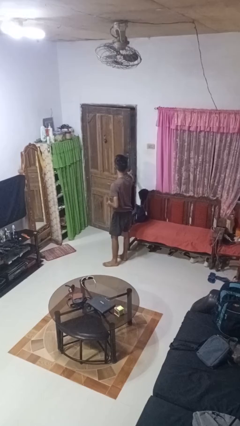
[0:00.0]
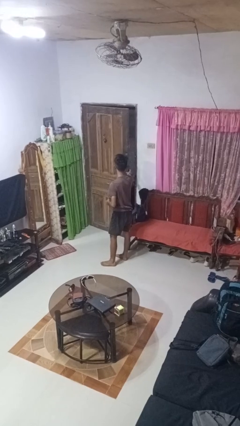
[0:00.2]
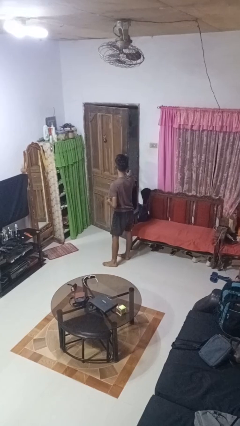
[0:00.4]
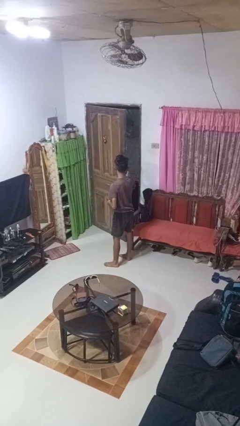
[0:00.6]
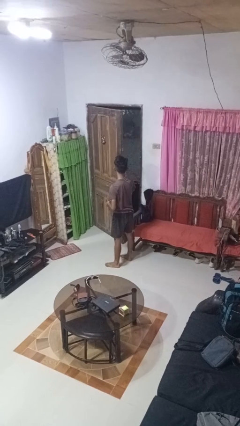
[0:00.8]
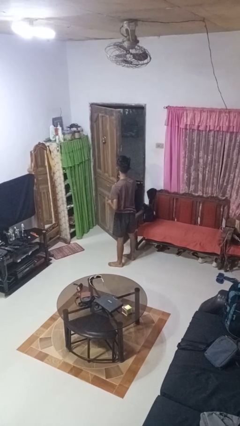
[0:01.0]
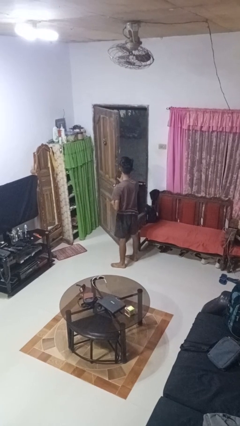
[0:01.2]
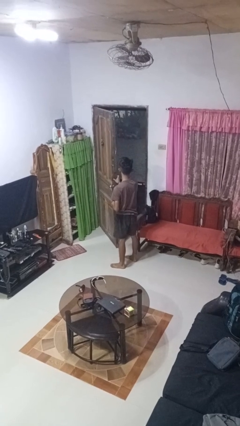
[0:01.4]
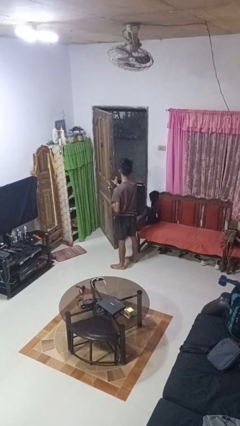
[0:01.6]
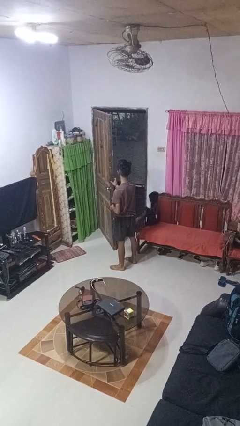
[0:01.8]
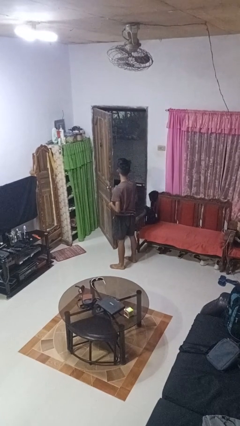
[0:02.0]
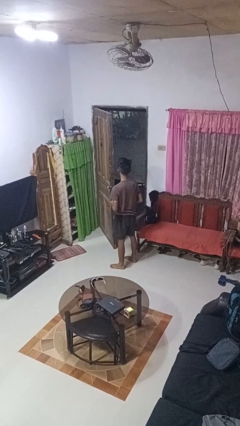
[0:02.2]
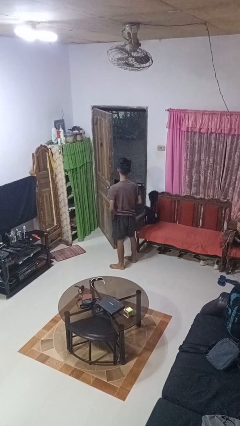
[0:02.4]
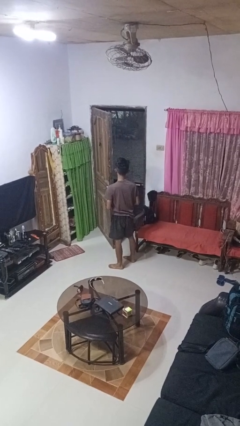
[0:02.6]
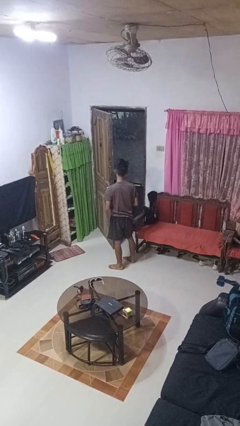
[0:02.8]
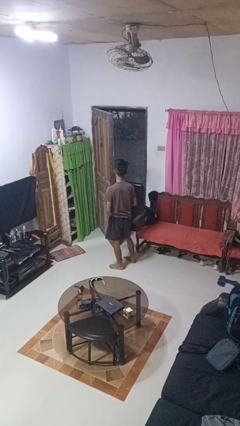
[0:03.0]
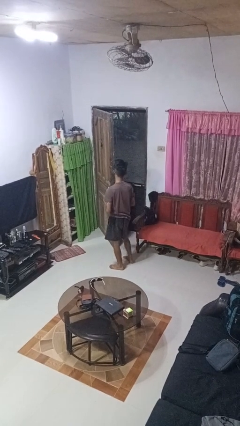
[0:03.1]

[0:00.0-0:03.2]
person opens facility door

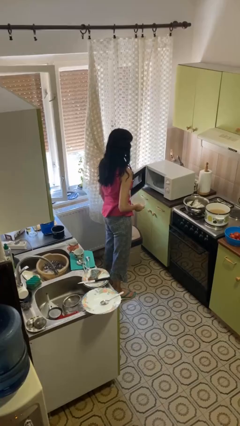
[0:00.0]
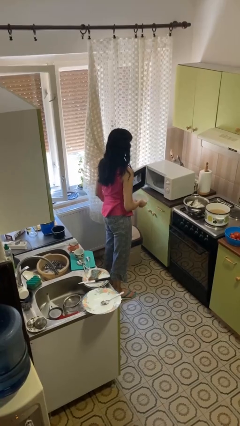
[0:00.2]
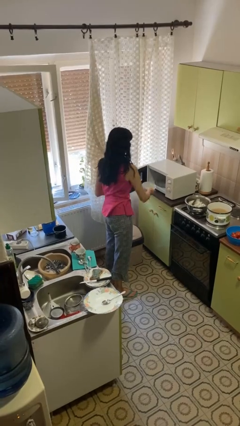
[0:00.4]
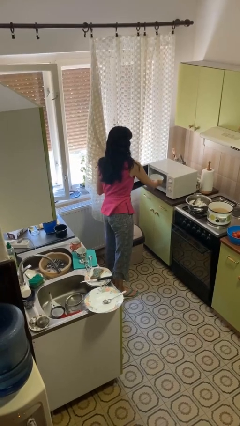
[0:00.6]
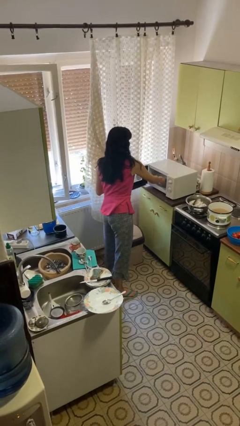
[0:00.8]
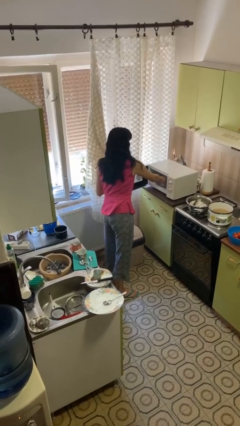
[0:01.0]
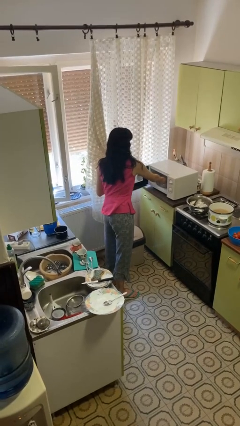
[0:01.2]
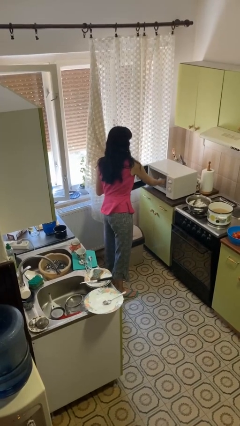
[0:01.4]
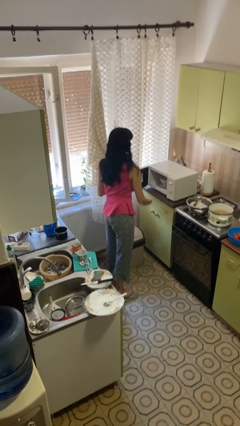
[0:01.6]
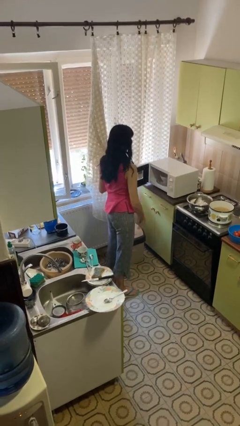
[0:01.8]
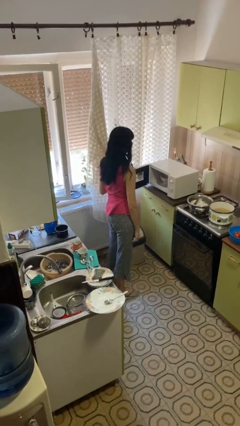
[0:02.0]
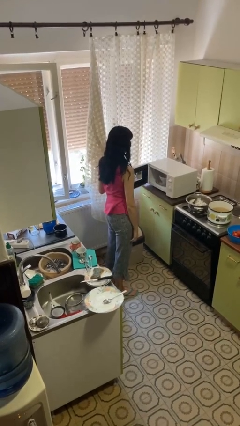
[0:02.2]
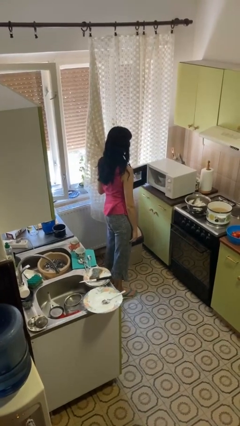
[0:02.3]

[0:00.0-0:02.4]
person puts object into microwave

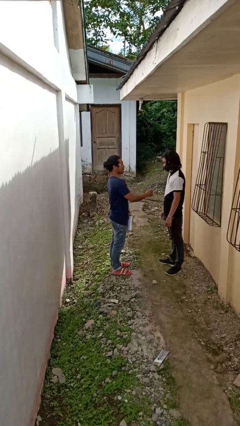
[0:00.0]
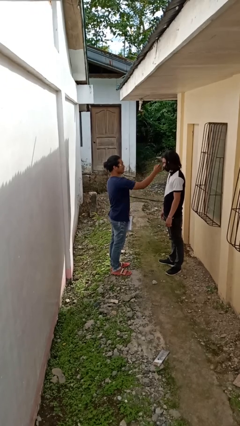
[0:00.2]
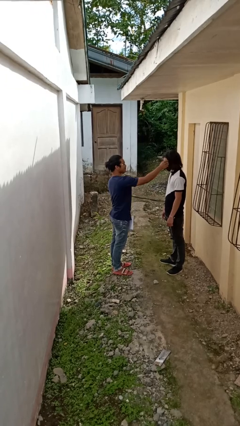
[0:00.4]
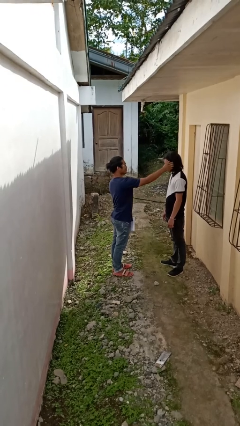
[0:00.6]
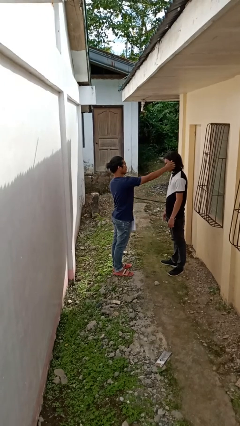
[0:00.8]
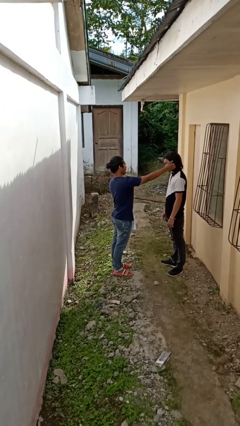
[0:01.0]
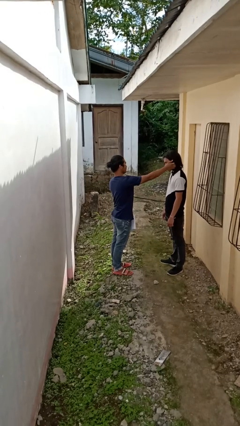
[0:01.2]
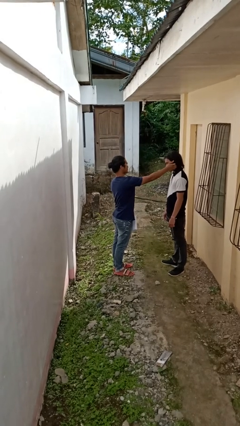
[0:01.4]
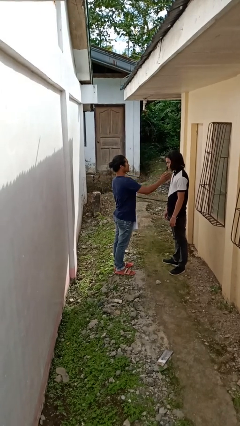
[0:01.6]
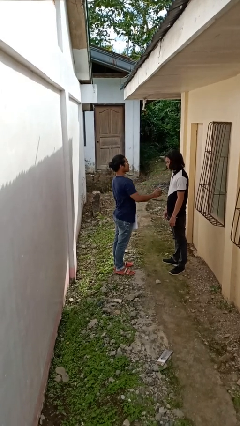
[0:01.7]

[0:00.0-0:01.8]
person touches face of person

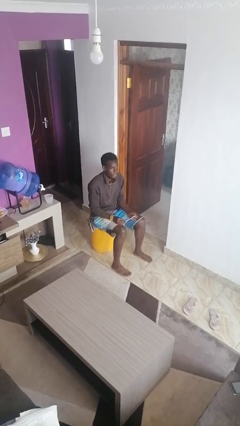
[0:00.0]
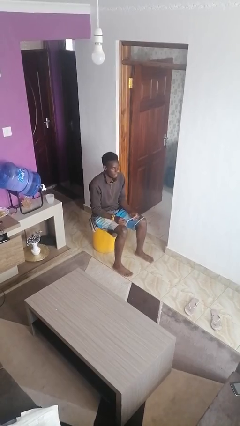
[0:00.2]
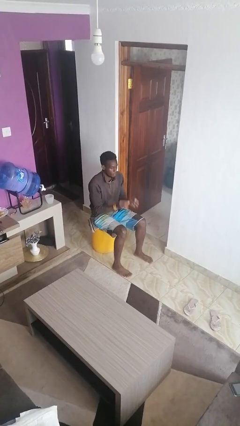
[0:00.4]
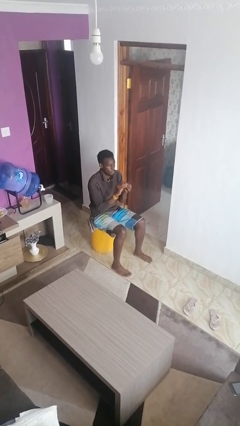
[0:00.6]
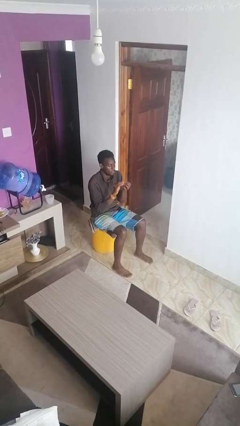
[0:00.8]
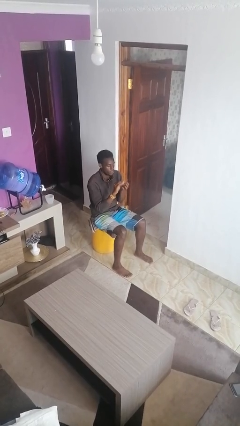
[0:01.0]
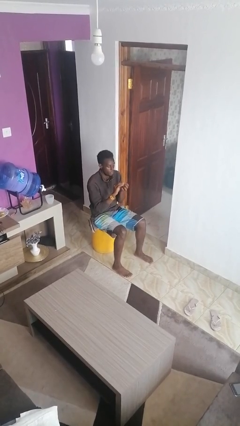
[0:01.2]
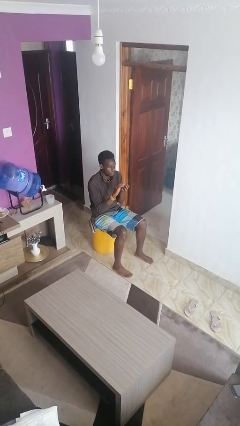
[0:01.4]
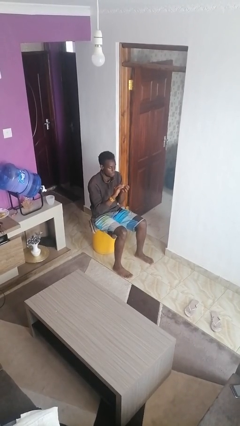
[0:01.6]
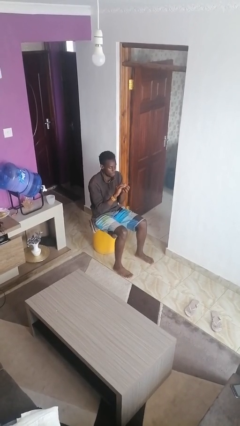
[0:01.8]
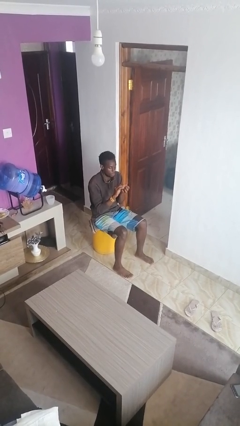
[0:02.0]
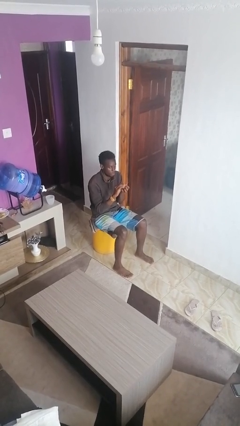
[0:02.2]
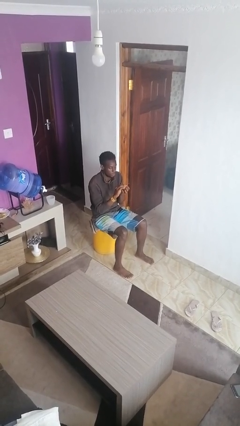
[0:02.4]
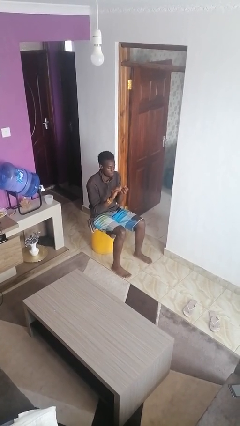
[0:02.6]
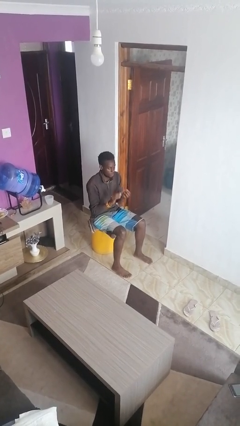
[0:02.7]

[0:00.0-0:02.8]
person files fingernails

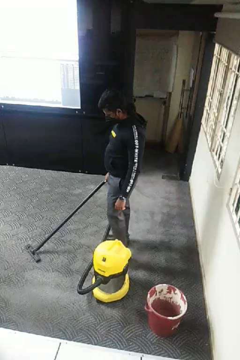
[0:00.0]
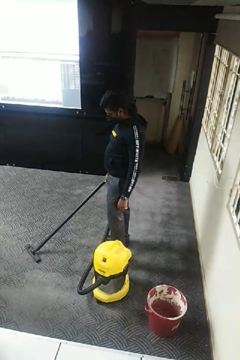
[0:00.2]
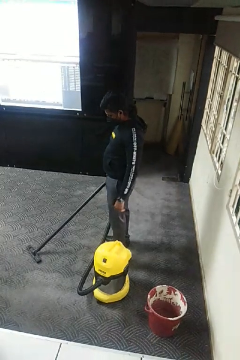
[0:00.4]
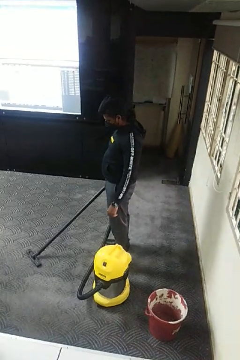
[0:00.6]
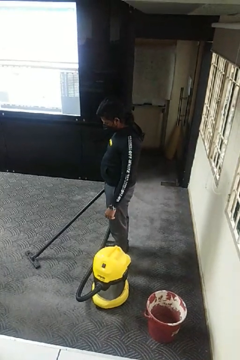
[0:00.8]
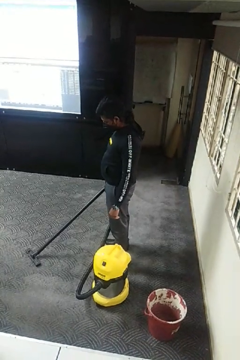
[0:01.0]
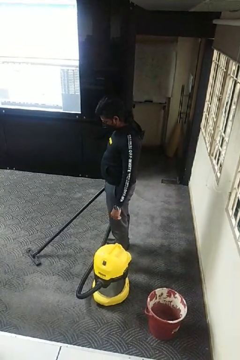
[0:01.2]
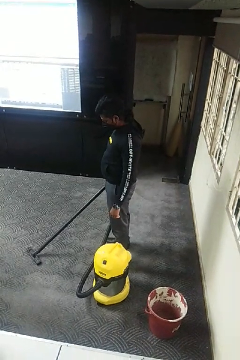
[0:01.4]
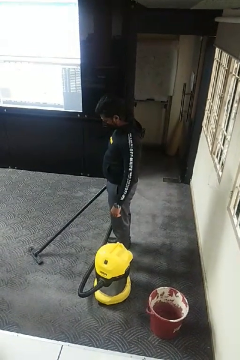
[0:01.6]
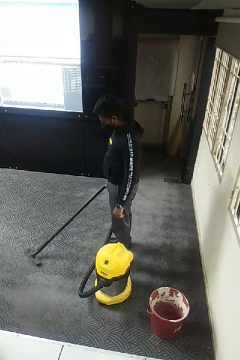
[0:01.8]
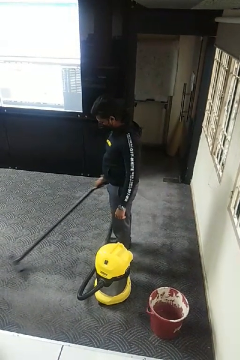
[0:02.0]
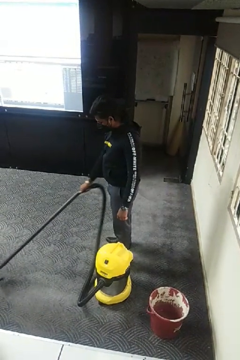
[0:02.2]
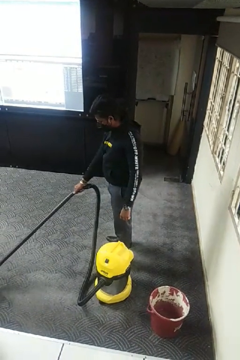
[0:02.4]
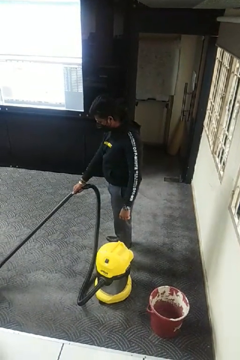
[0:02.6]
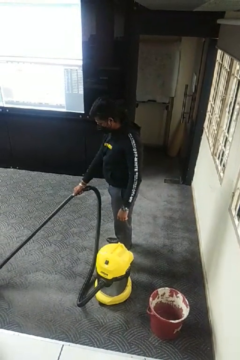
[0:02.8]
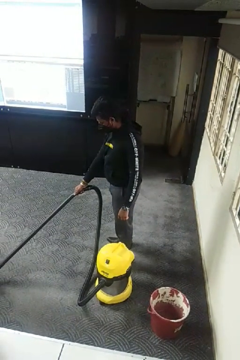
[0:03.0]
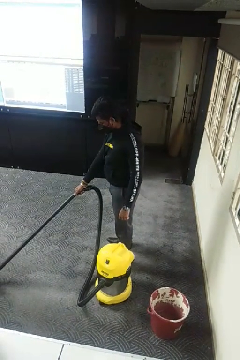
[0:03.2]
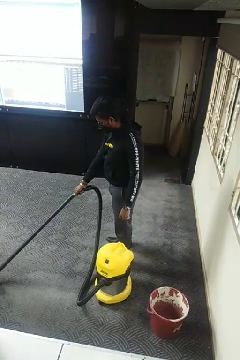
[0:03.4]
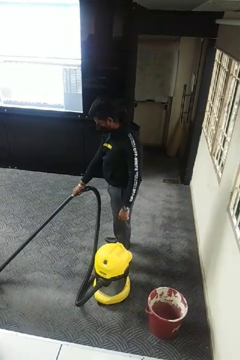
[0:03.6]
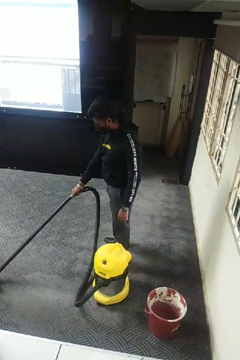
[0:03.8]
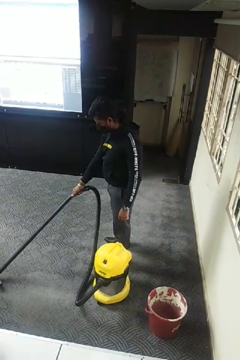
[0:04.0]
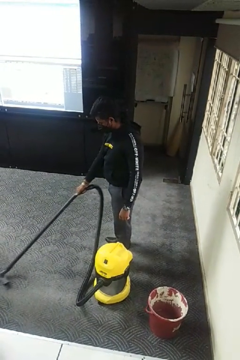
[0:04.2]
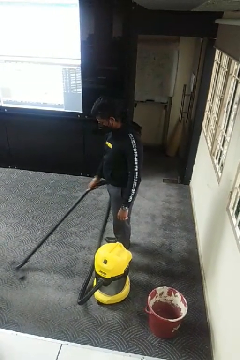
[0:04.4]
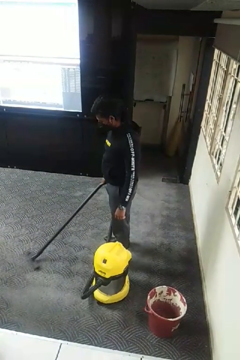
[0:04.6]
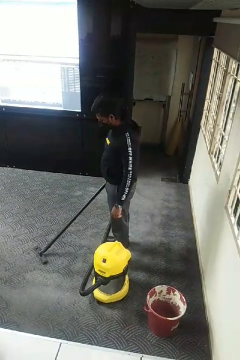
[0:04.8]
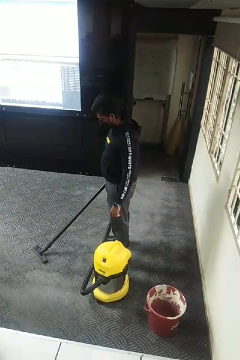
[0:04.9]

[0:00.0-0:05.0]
person vacuums carpet

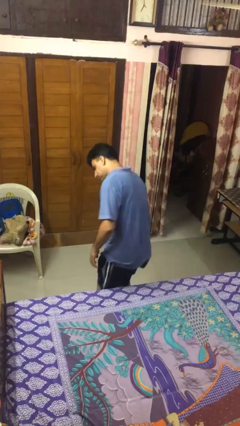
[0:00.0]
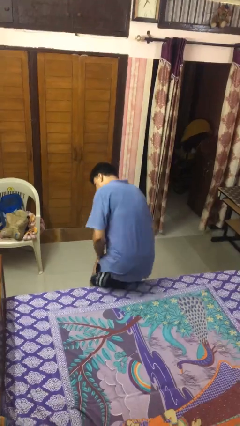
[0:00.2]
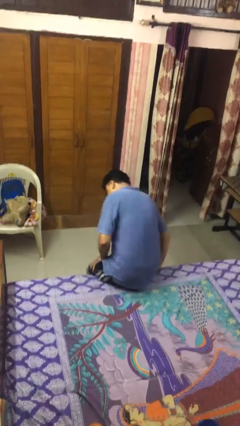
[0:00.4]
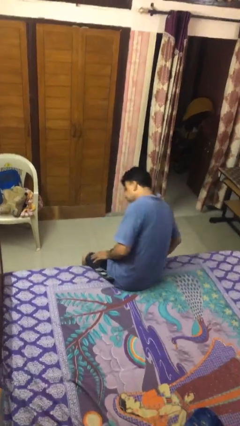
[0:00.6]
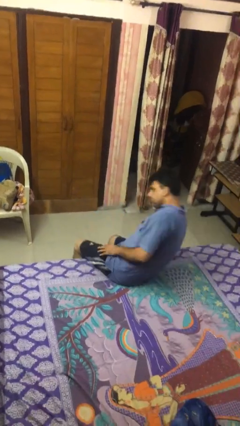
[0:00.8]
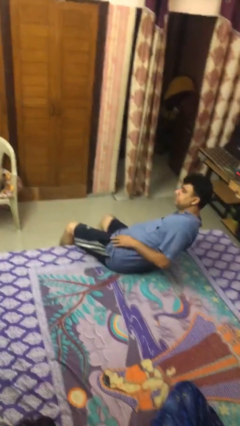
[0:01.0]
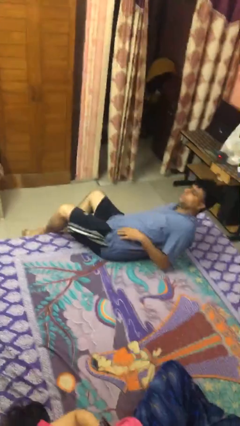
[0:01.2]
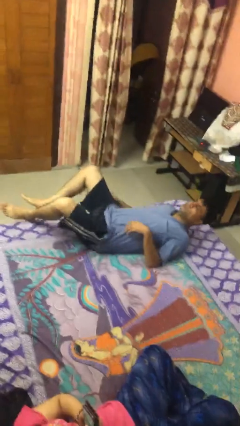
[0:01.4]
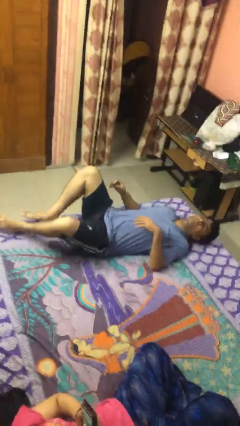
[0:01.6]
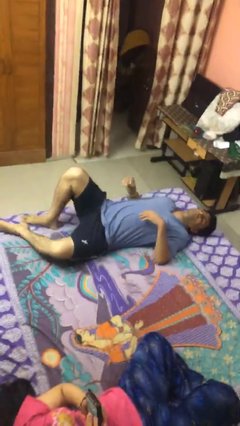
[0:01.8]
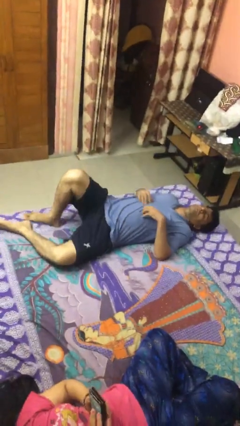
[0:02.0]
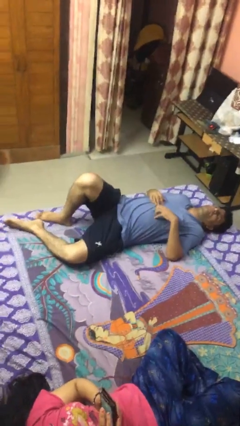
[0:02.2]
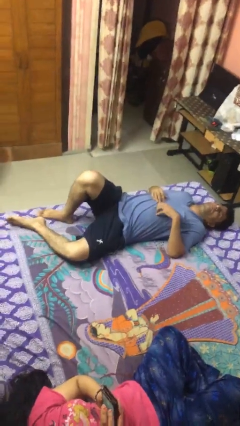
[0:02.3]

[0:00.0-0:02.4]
person lies down on bed

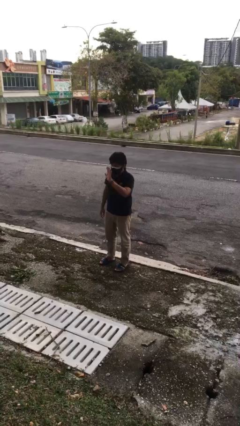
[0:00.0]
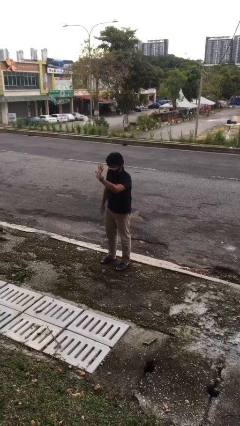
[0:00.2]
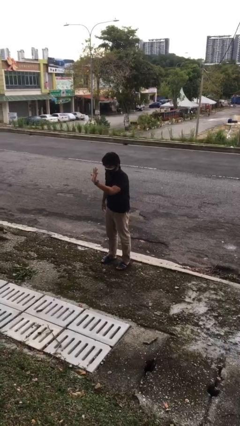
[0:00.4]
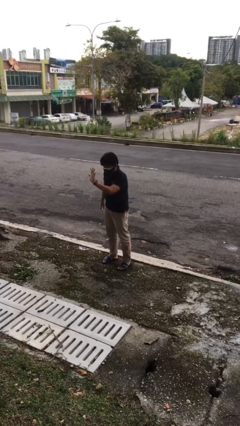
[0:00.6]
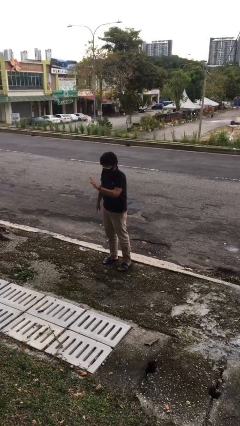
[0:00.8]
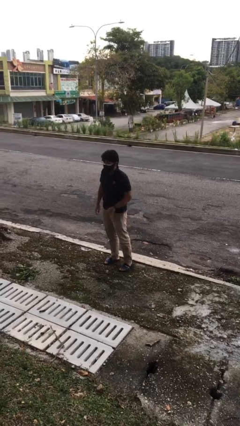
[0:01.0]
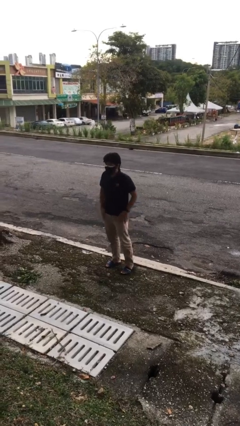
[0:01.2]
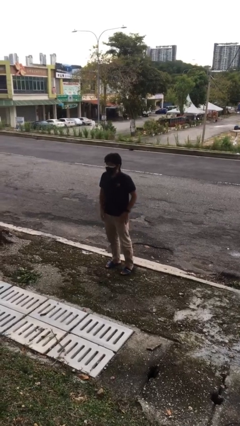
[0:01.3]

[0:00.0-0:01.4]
person gestures stop
